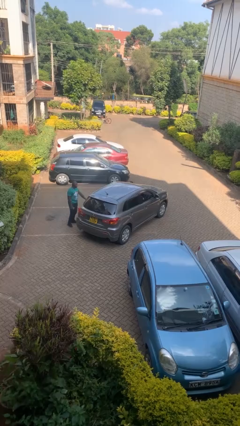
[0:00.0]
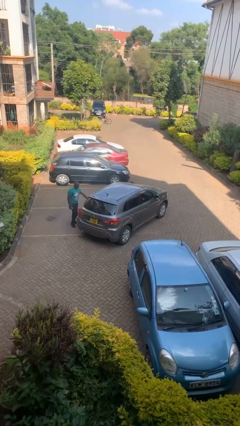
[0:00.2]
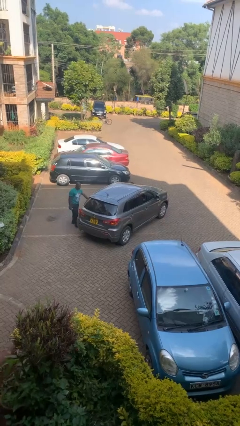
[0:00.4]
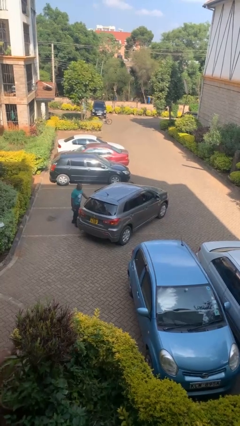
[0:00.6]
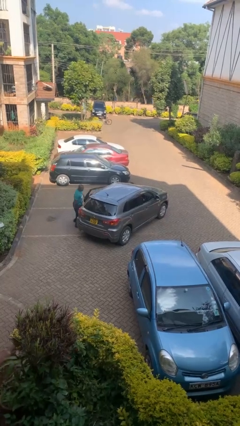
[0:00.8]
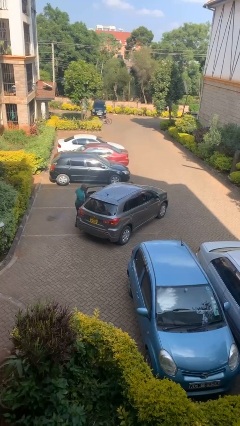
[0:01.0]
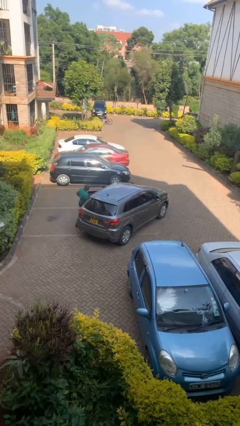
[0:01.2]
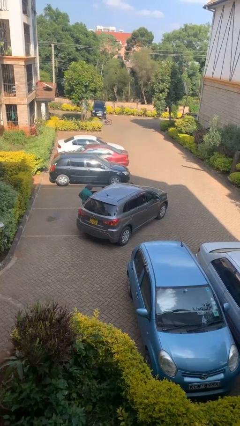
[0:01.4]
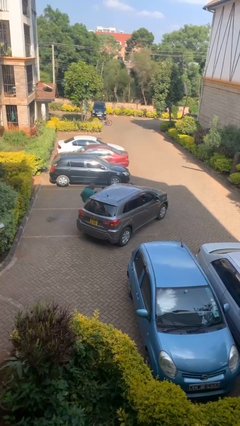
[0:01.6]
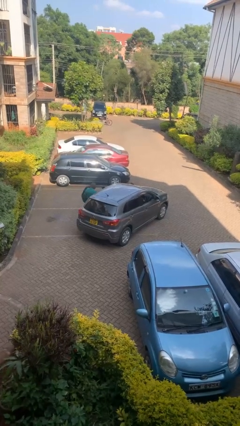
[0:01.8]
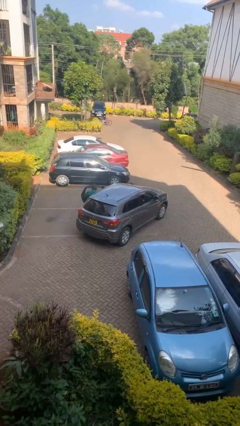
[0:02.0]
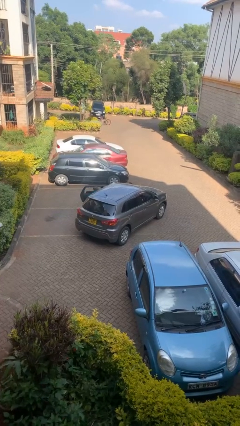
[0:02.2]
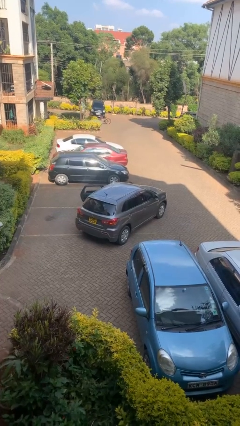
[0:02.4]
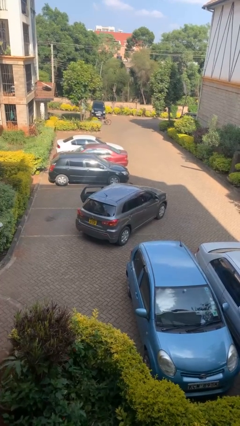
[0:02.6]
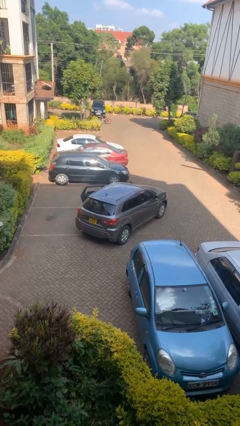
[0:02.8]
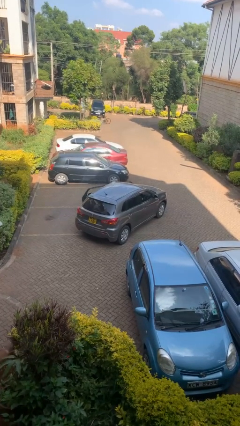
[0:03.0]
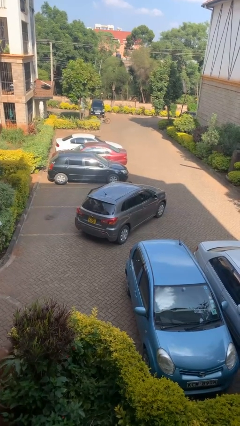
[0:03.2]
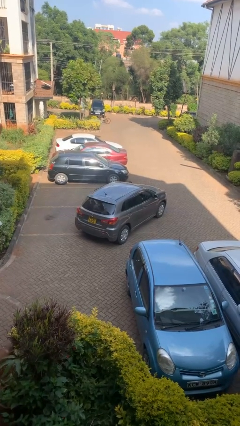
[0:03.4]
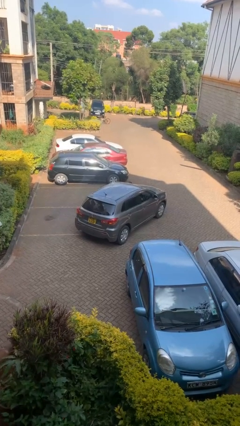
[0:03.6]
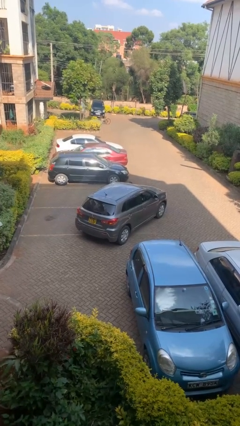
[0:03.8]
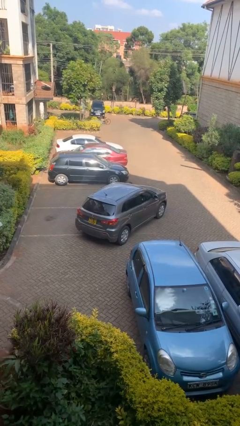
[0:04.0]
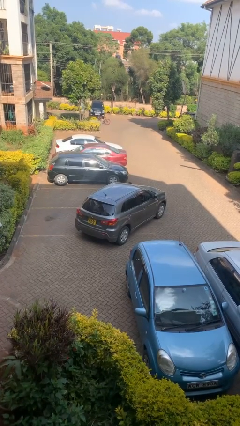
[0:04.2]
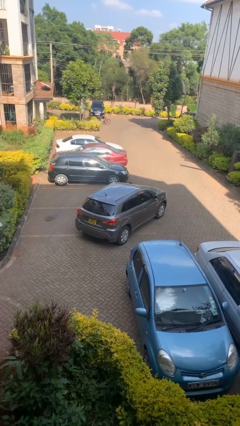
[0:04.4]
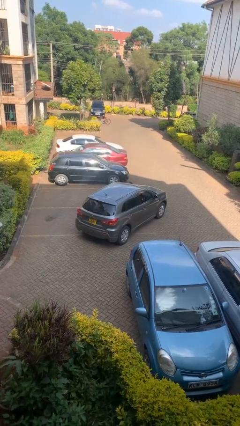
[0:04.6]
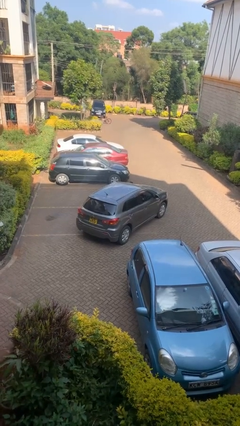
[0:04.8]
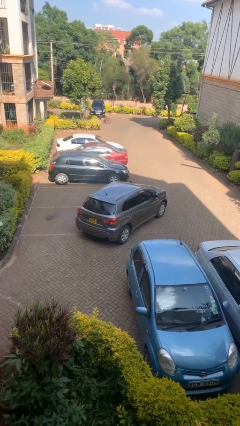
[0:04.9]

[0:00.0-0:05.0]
car picks up person

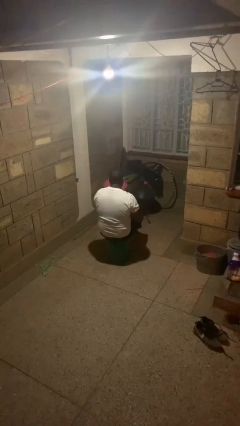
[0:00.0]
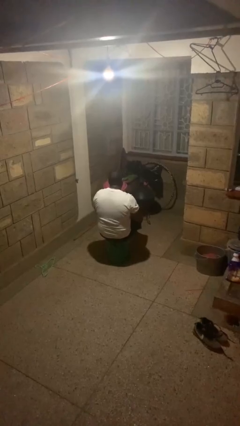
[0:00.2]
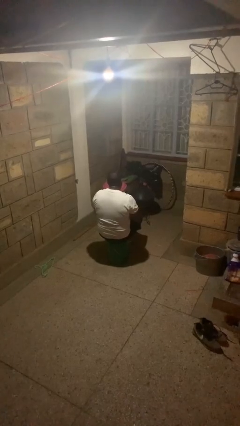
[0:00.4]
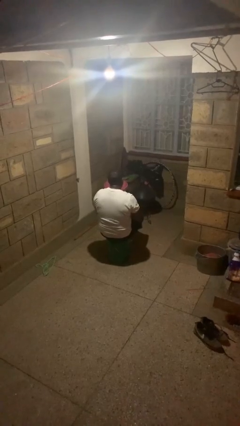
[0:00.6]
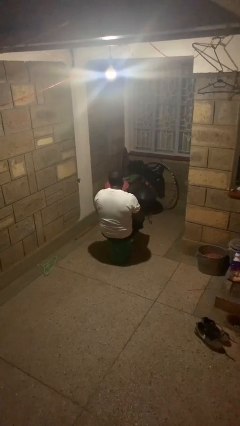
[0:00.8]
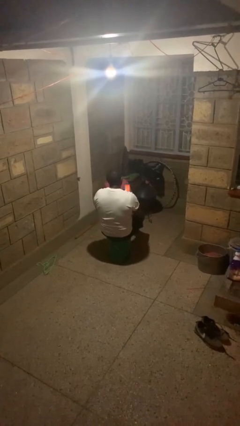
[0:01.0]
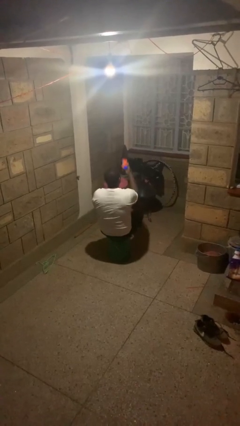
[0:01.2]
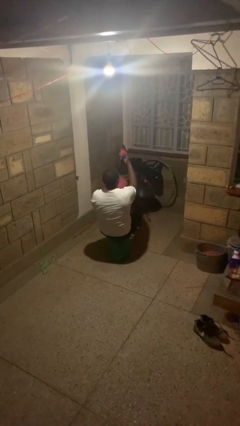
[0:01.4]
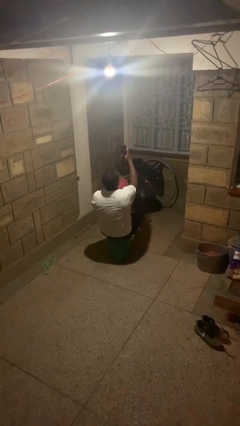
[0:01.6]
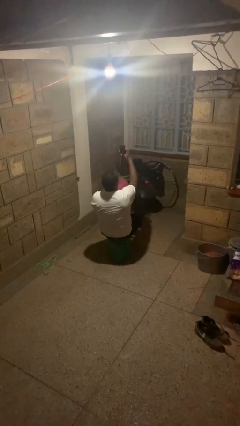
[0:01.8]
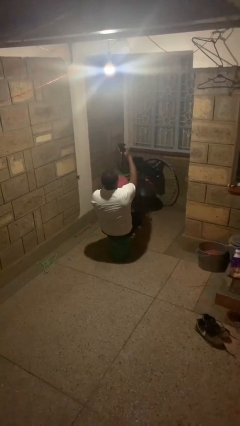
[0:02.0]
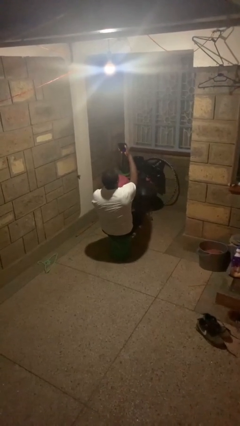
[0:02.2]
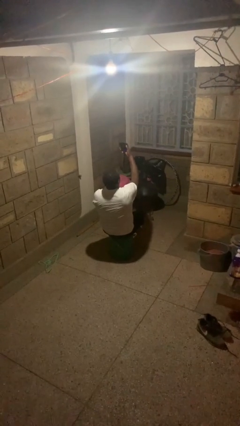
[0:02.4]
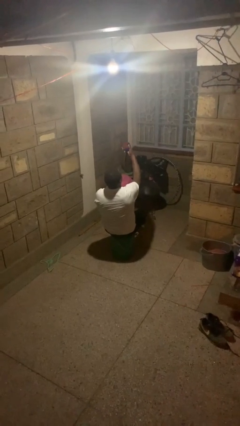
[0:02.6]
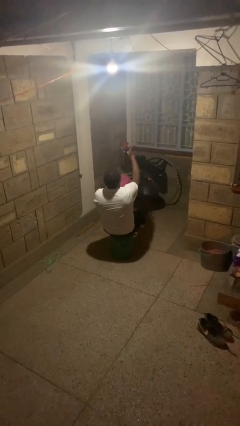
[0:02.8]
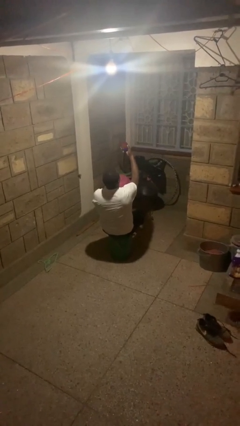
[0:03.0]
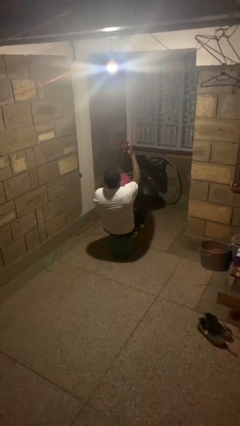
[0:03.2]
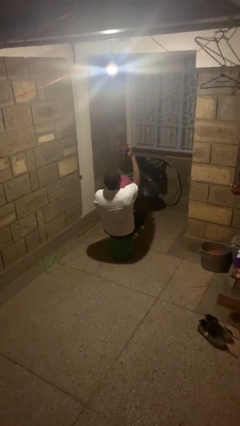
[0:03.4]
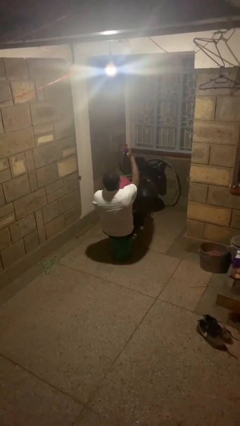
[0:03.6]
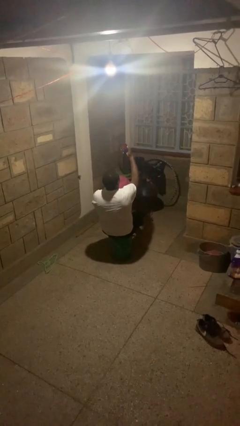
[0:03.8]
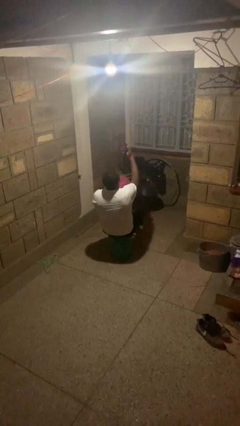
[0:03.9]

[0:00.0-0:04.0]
person takes selfie

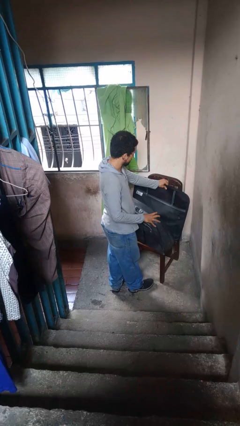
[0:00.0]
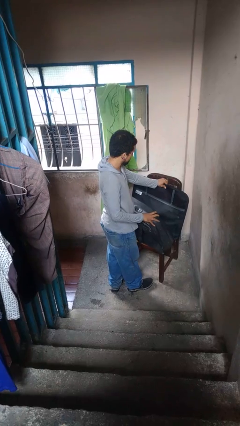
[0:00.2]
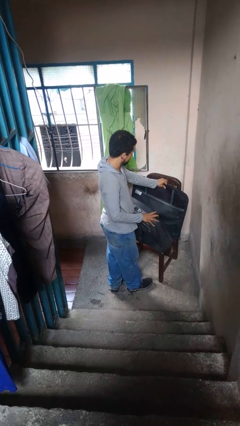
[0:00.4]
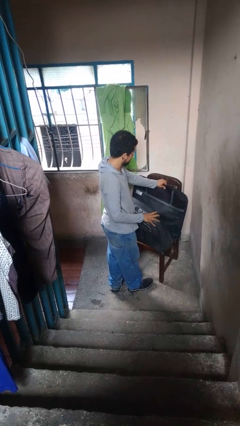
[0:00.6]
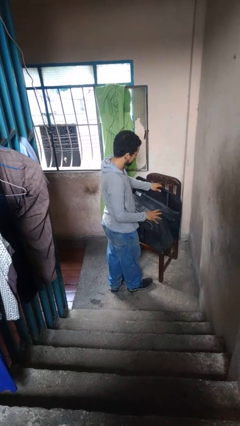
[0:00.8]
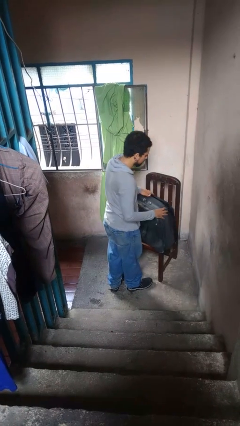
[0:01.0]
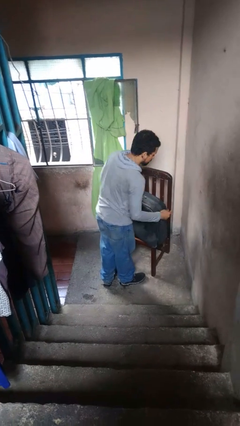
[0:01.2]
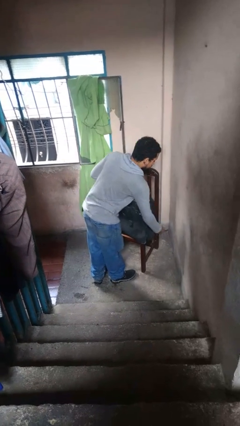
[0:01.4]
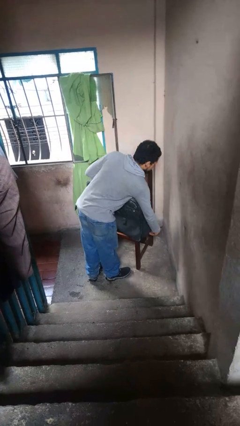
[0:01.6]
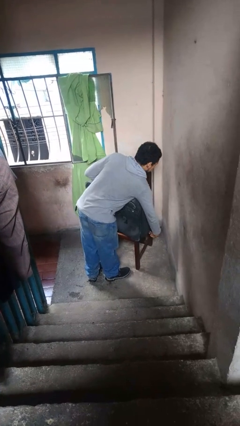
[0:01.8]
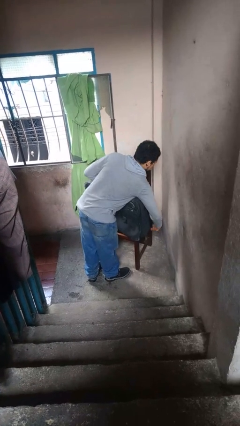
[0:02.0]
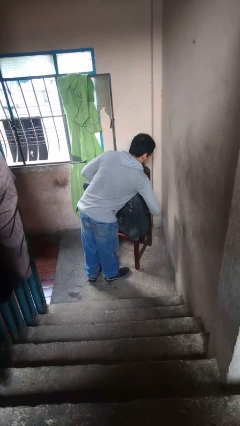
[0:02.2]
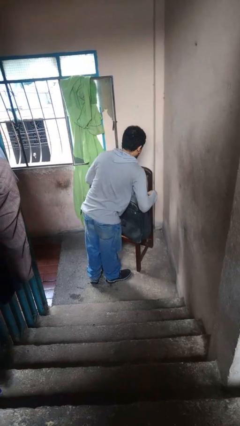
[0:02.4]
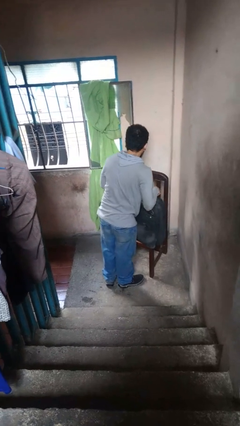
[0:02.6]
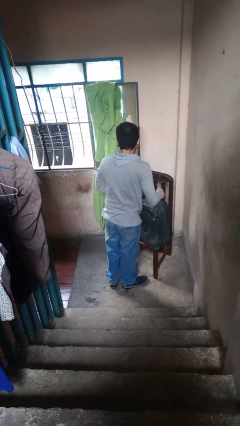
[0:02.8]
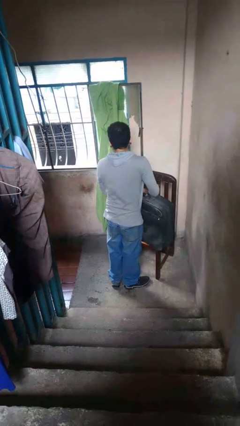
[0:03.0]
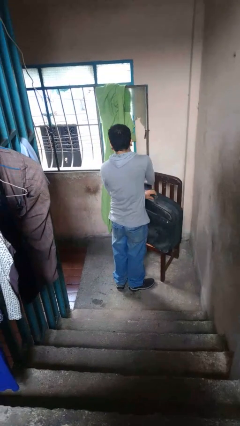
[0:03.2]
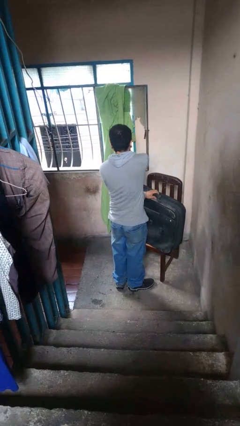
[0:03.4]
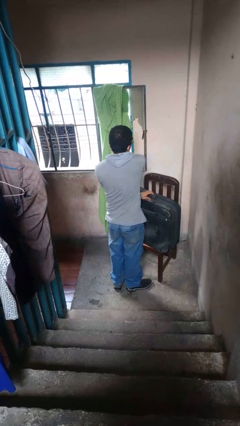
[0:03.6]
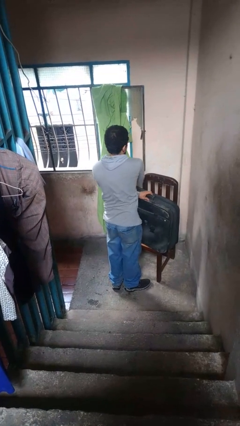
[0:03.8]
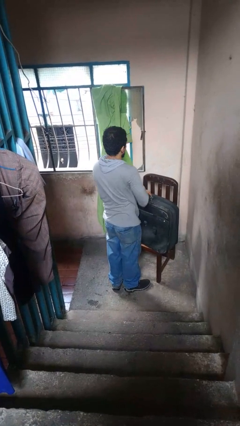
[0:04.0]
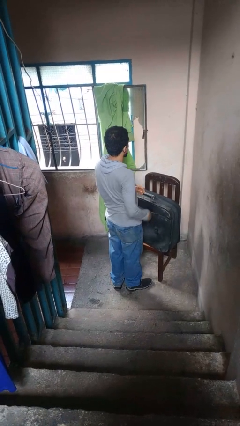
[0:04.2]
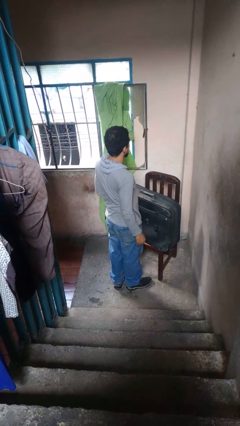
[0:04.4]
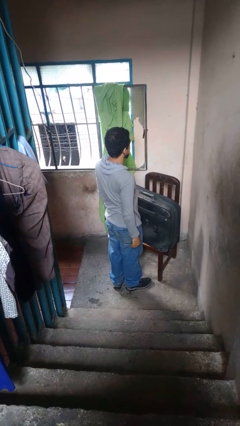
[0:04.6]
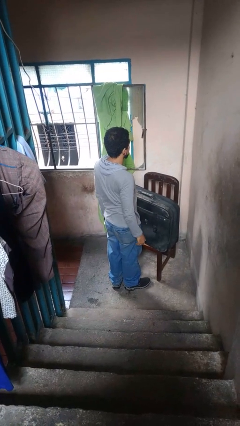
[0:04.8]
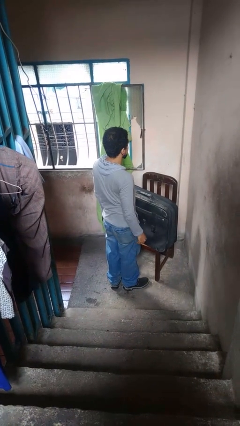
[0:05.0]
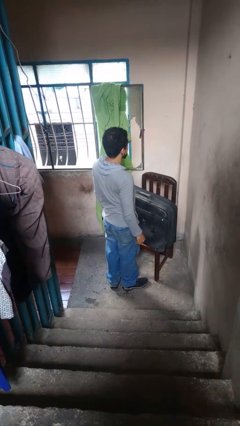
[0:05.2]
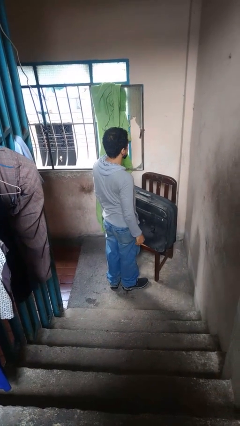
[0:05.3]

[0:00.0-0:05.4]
person closes suitcase

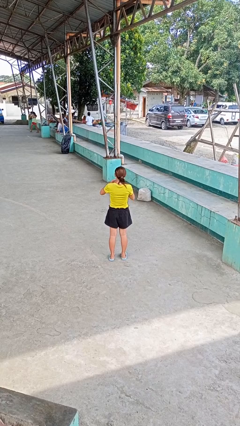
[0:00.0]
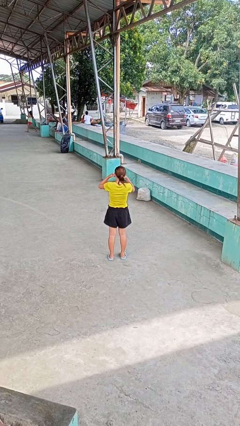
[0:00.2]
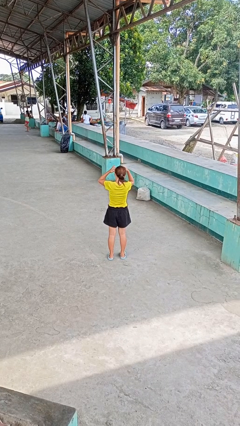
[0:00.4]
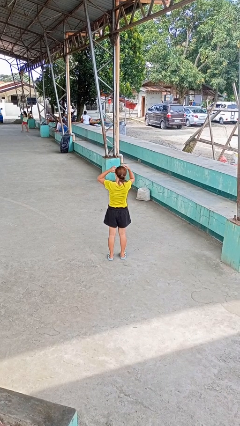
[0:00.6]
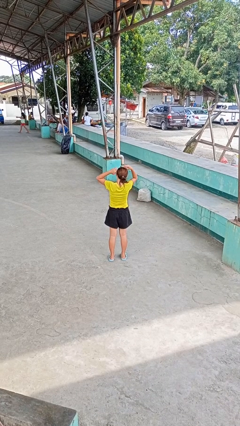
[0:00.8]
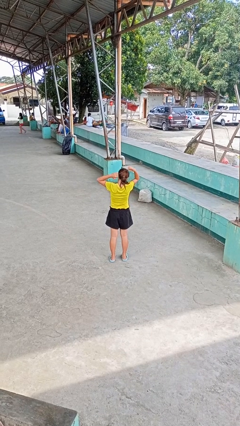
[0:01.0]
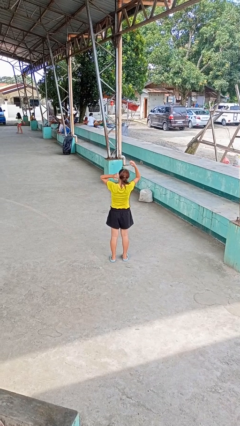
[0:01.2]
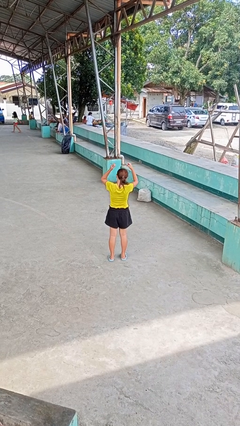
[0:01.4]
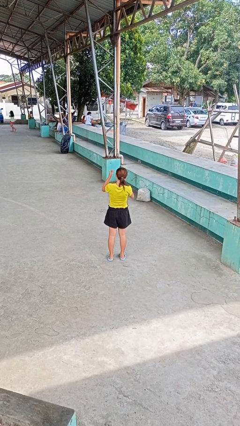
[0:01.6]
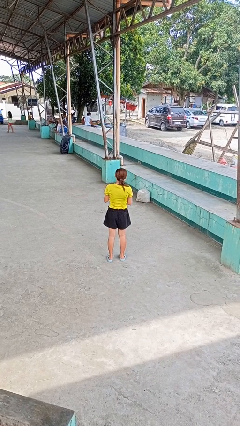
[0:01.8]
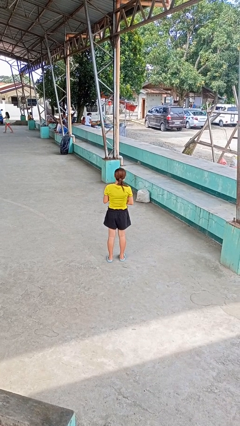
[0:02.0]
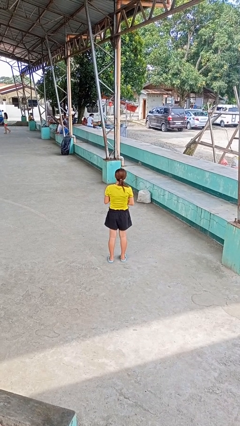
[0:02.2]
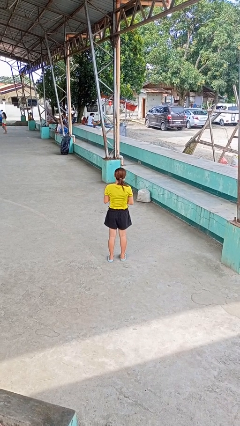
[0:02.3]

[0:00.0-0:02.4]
person takes off necklace

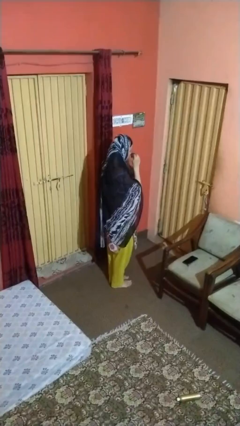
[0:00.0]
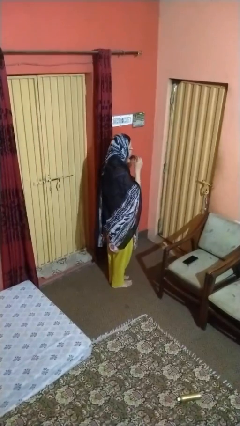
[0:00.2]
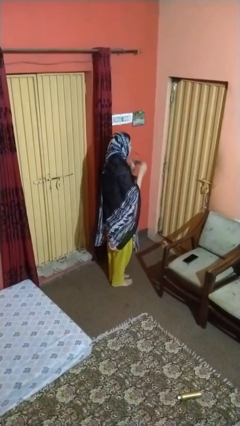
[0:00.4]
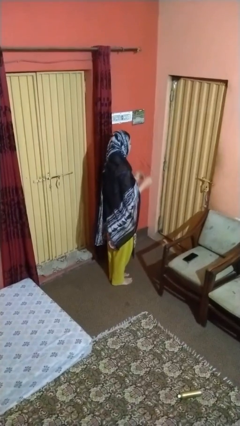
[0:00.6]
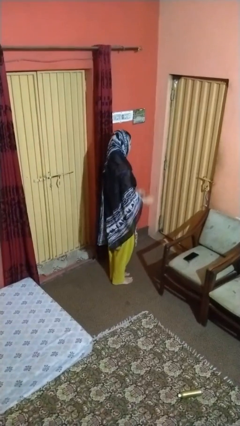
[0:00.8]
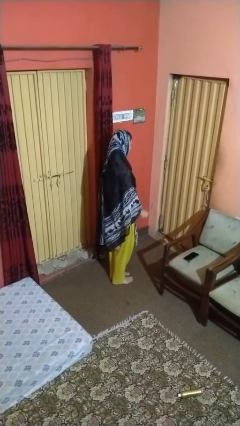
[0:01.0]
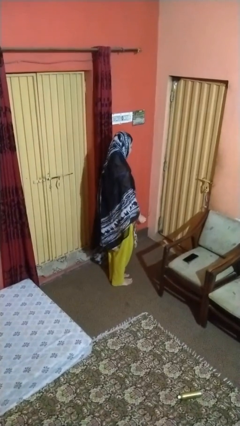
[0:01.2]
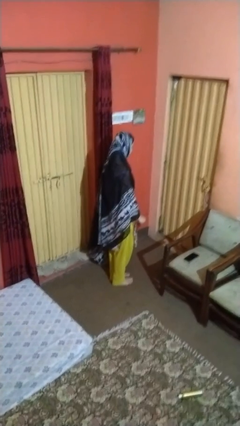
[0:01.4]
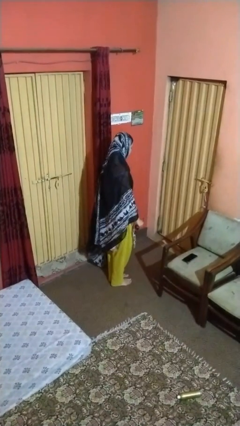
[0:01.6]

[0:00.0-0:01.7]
person takes off sunglasses
